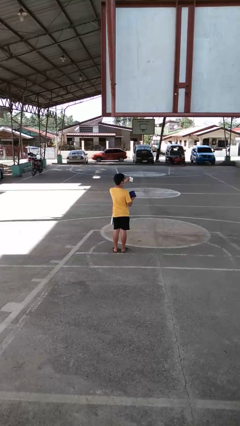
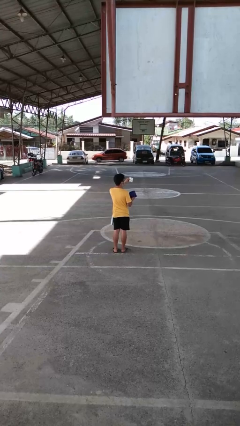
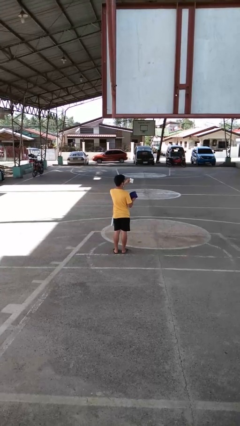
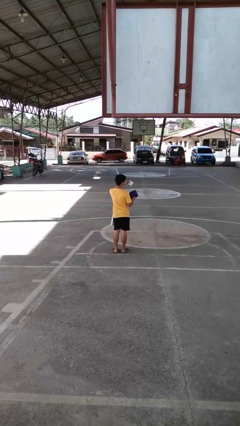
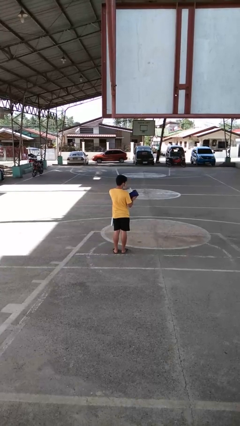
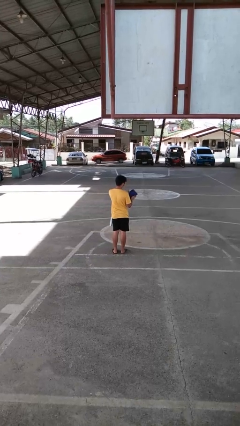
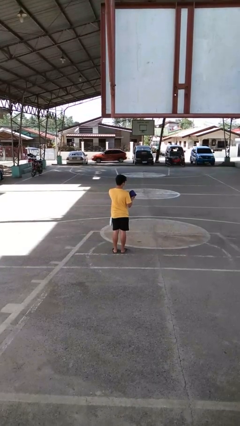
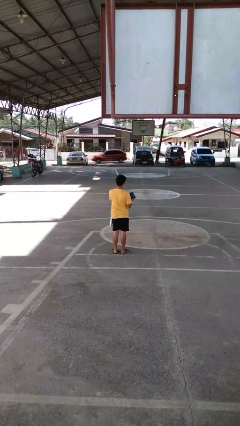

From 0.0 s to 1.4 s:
person takes off glasses

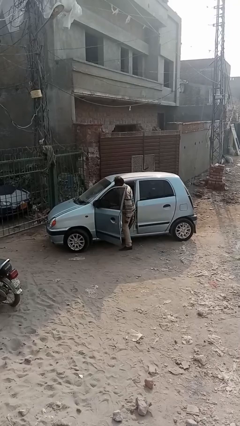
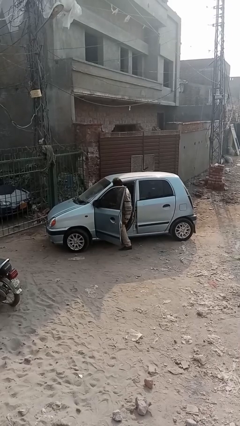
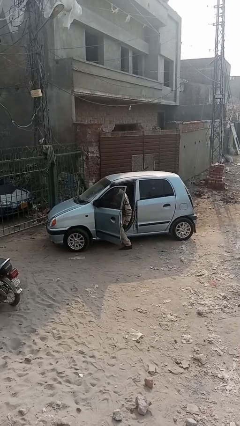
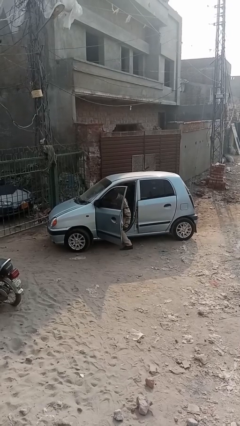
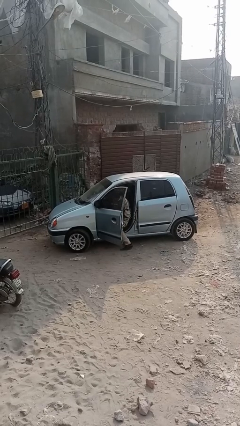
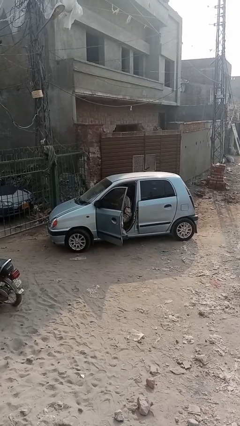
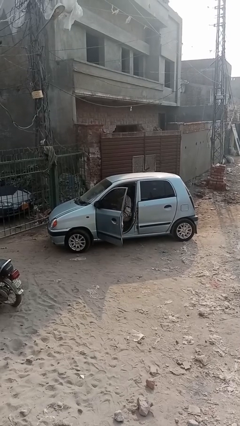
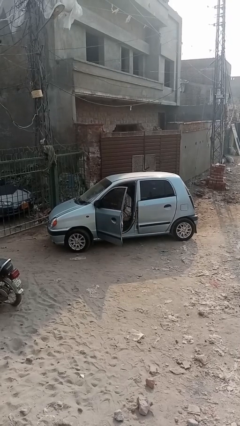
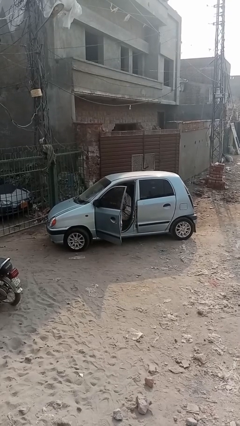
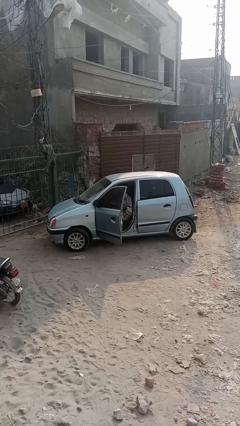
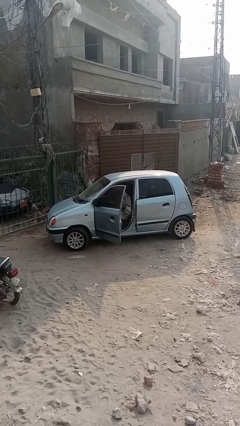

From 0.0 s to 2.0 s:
person enters car

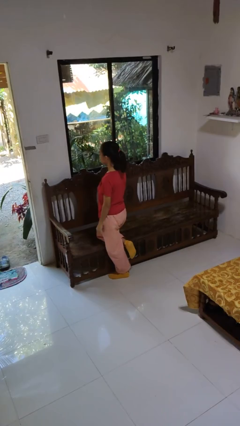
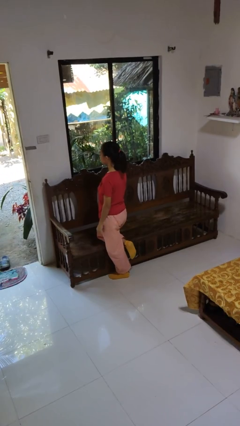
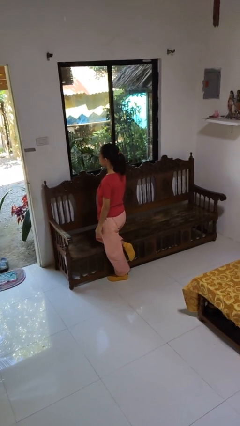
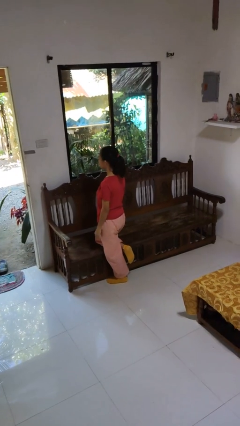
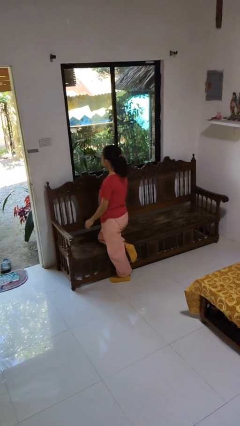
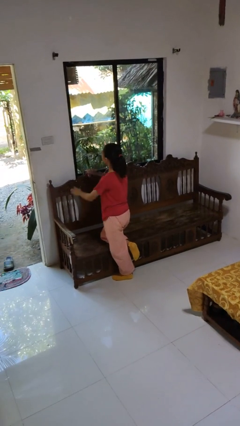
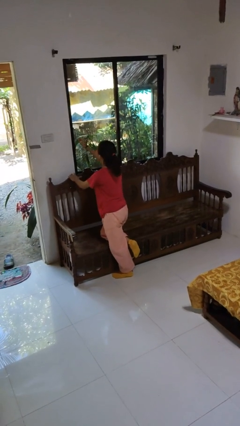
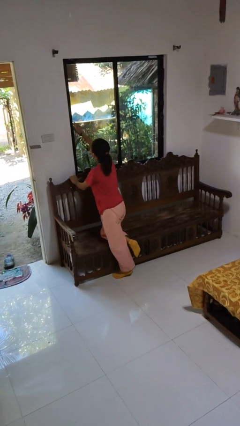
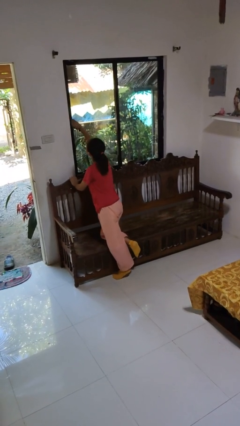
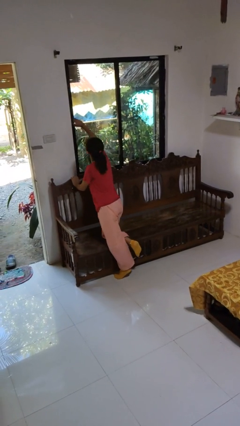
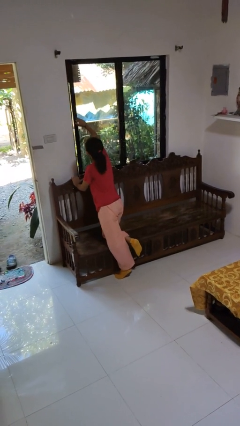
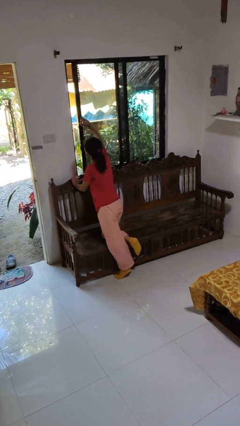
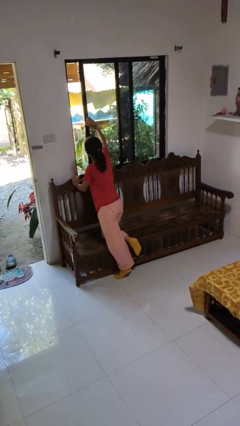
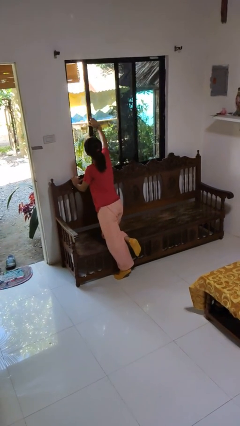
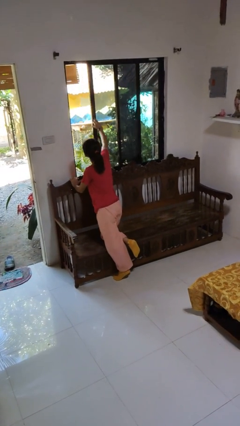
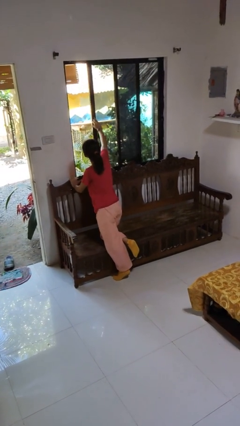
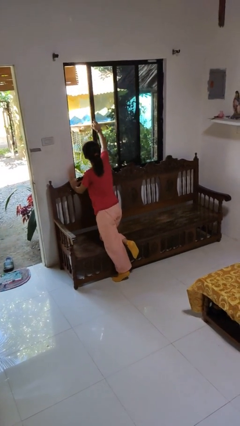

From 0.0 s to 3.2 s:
person opens home window

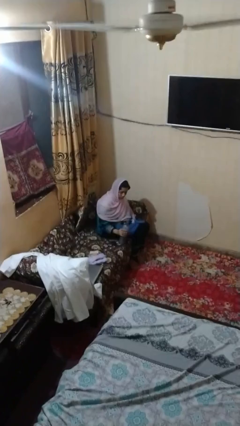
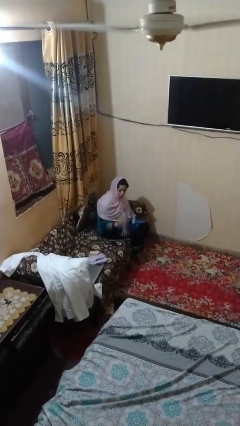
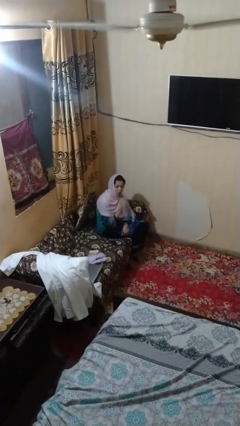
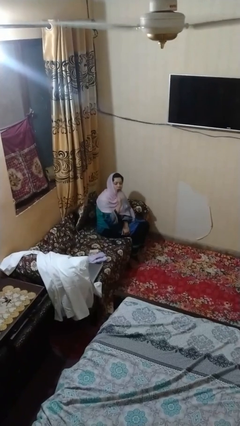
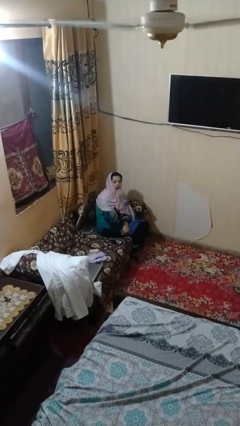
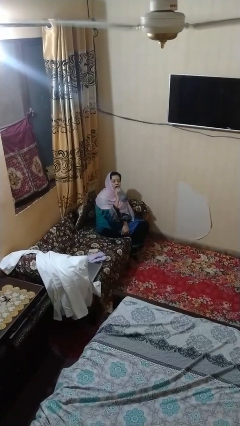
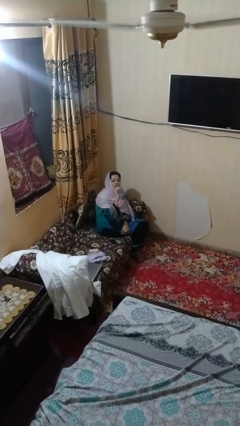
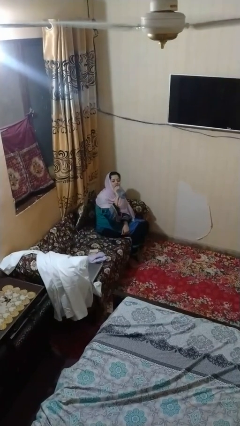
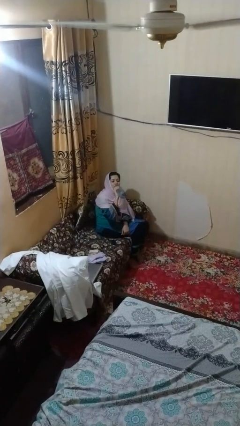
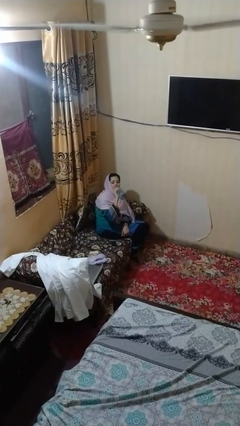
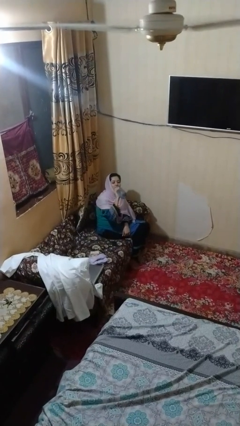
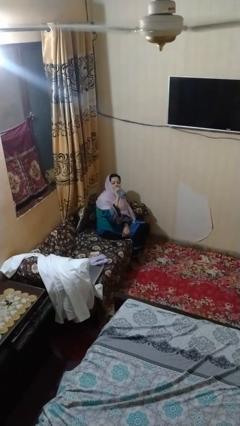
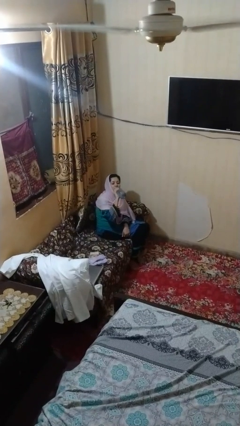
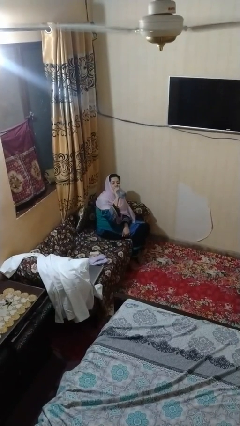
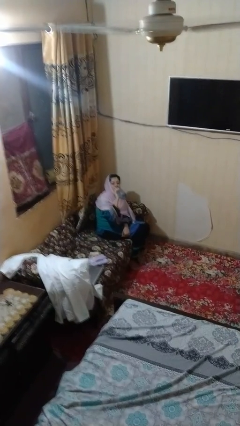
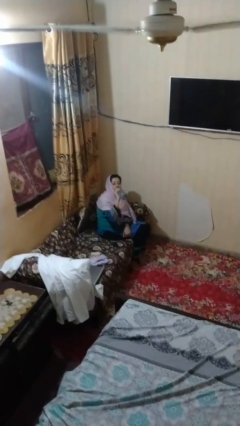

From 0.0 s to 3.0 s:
person drinks from bottle

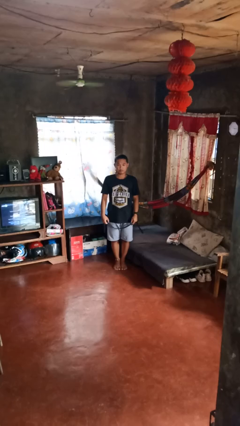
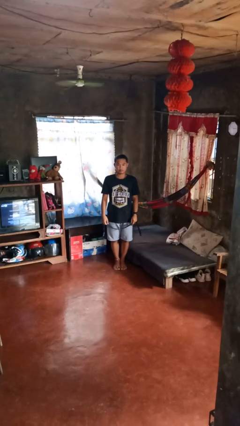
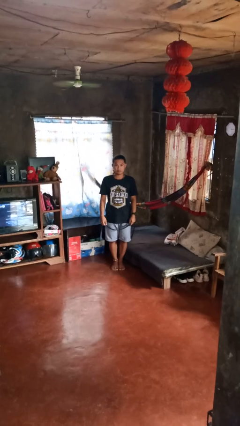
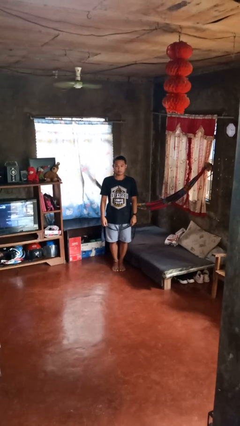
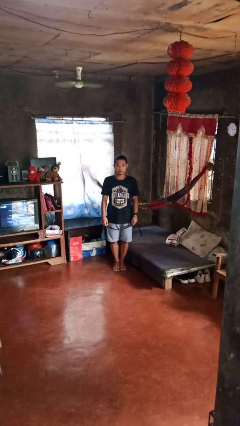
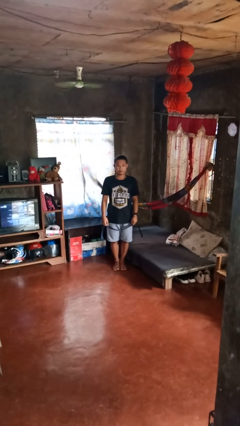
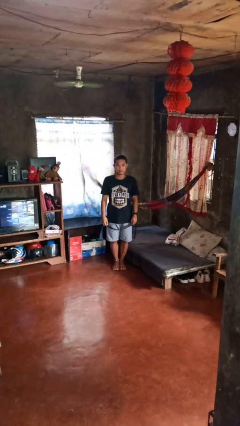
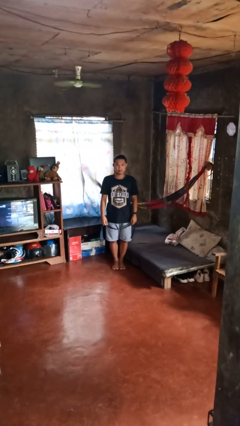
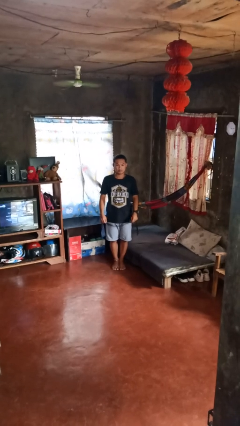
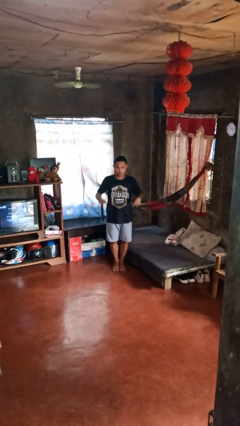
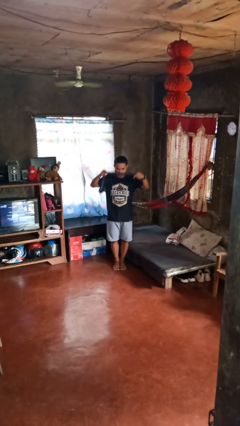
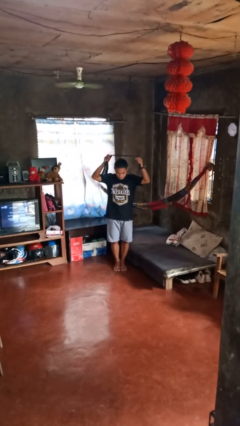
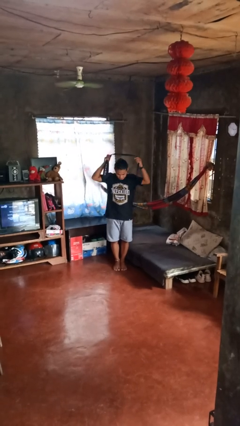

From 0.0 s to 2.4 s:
person dries hair with hairdryer

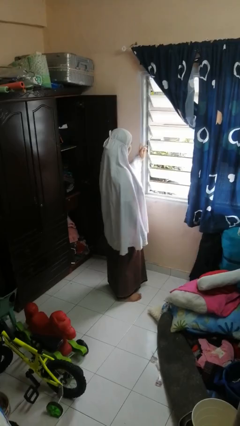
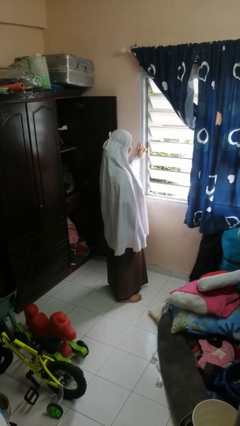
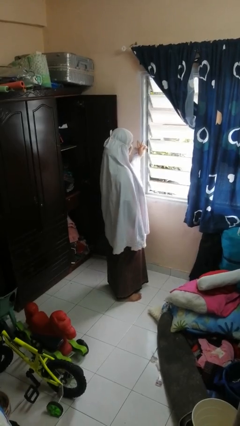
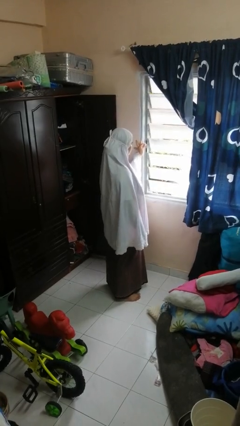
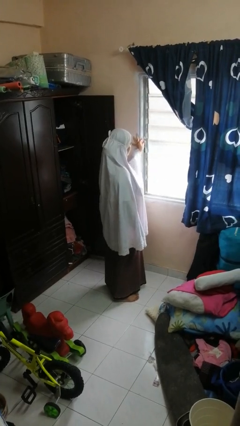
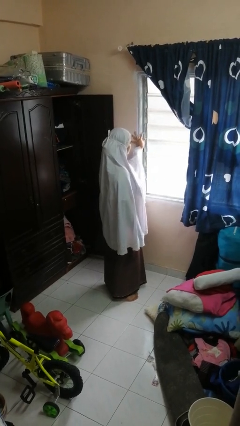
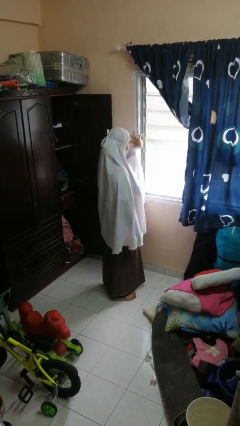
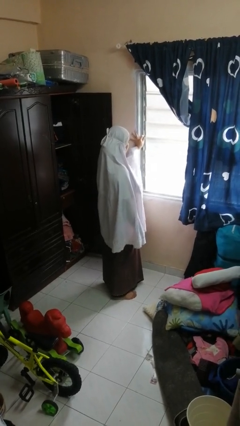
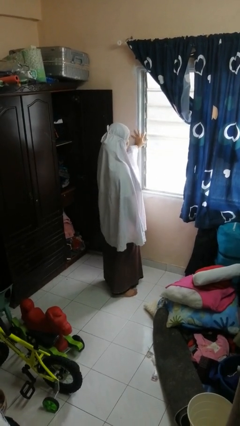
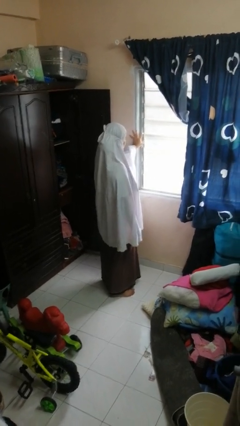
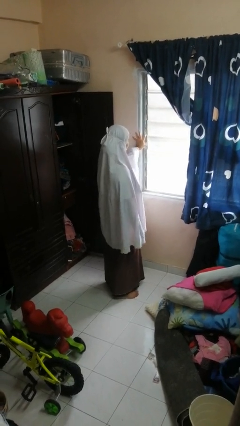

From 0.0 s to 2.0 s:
person closes home window

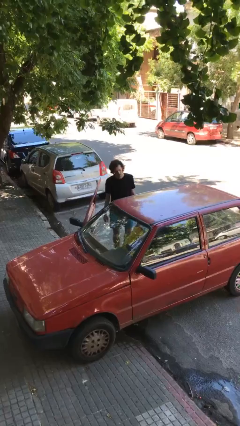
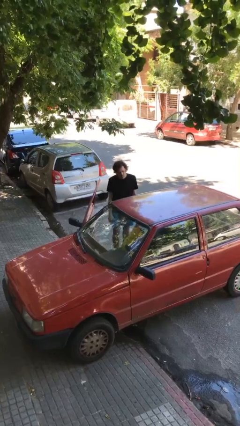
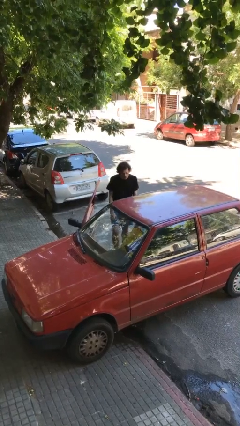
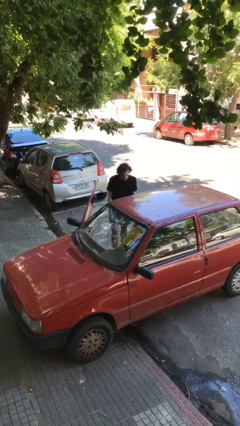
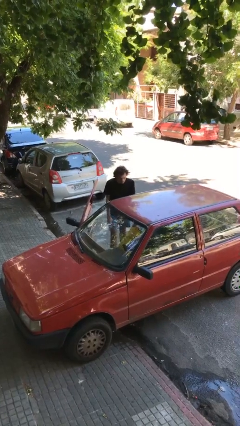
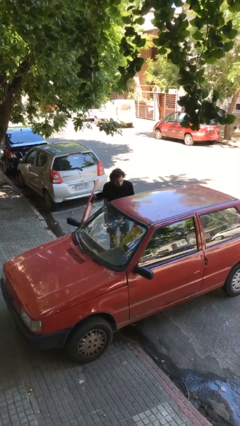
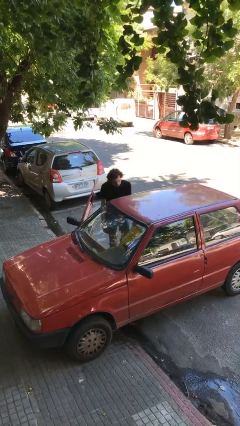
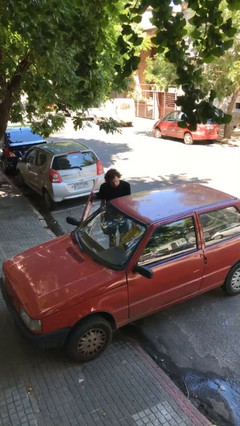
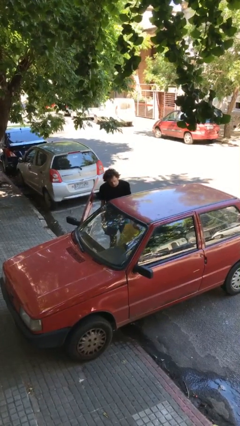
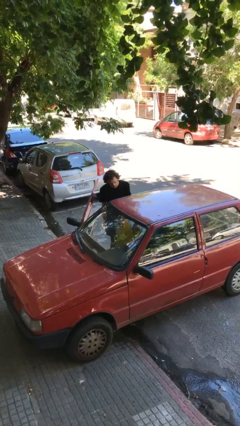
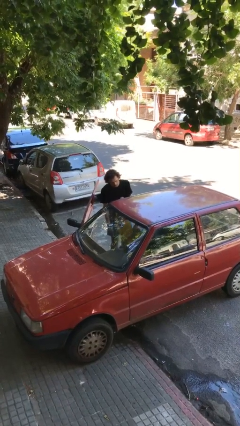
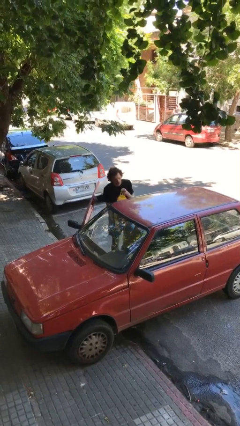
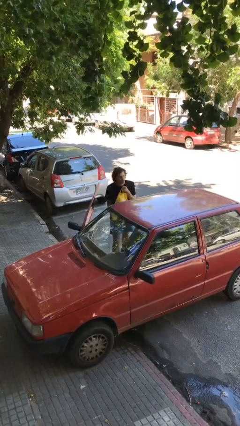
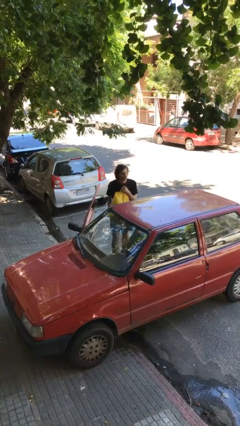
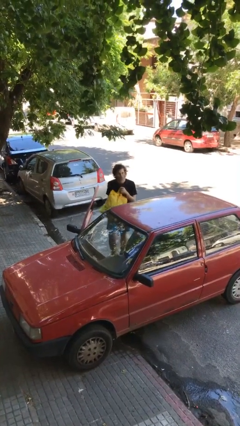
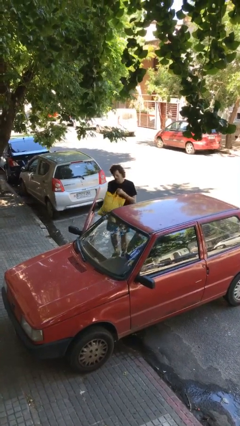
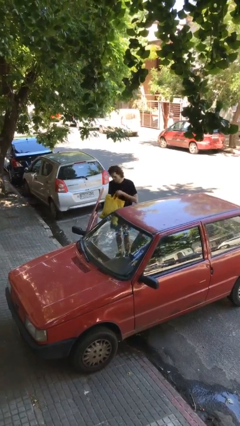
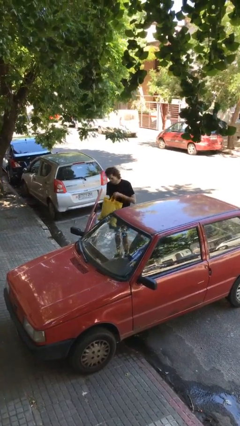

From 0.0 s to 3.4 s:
person unloads car
